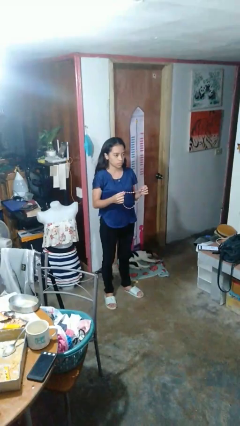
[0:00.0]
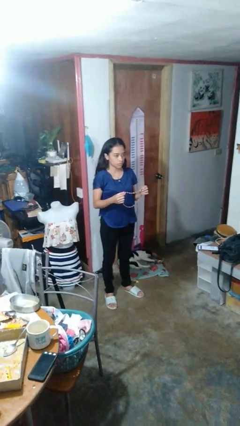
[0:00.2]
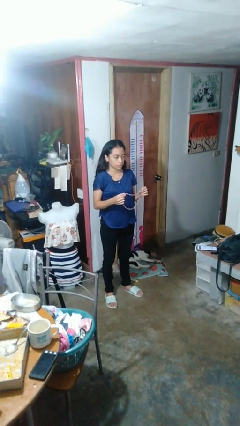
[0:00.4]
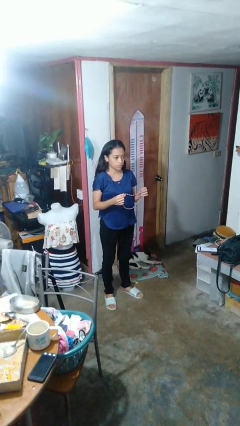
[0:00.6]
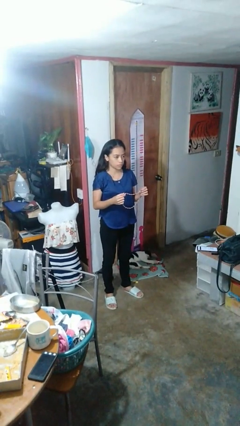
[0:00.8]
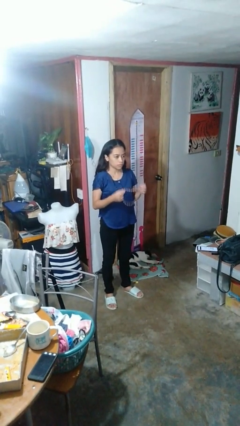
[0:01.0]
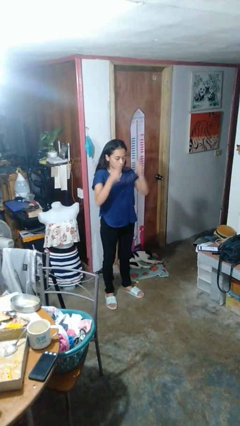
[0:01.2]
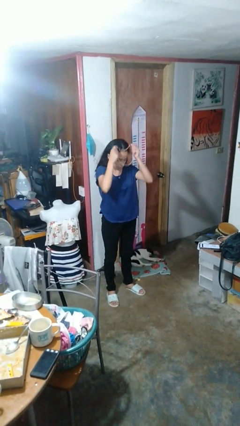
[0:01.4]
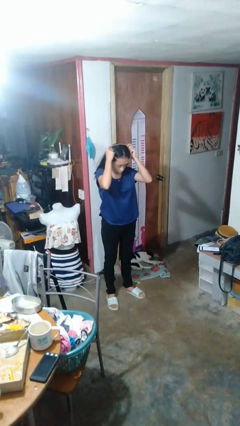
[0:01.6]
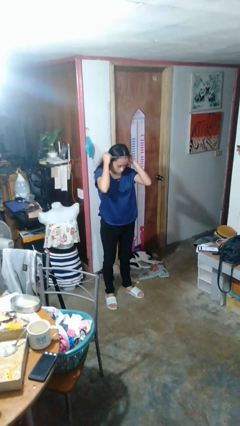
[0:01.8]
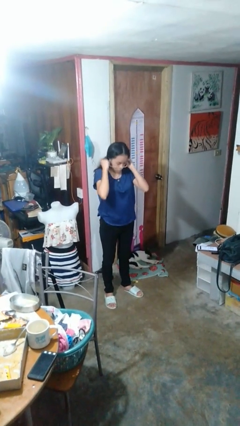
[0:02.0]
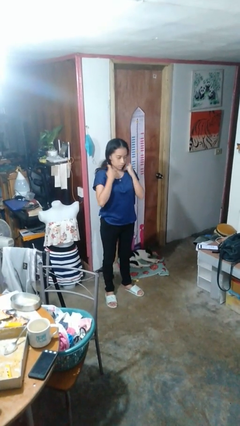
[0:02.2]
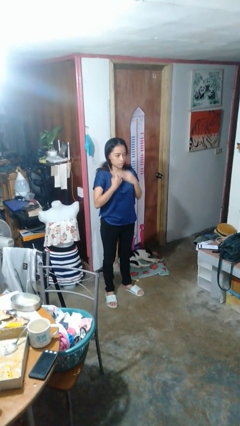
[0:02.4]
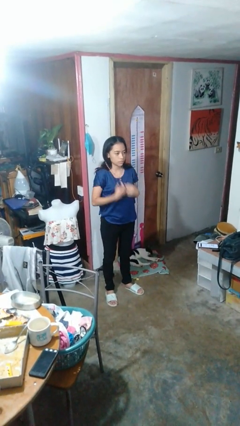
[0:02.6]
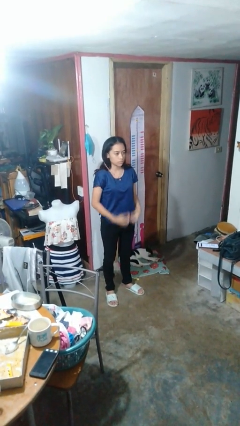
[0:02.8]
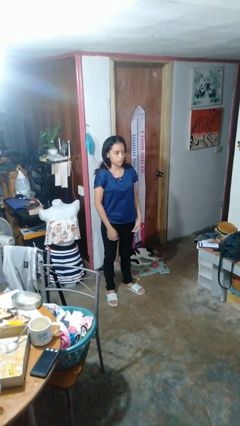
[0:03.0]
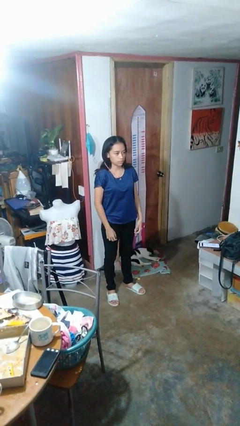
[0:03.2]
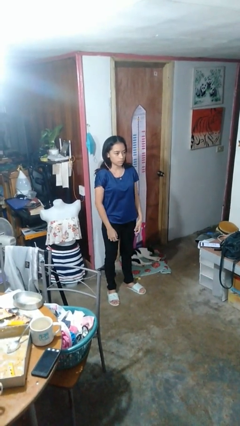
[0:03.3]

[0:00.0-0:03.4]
person puts on necklace

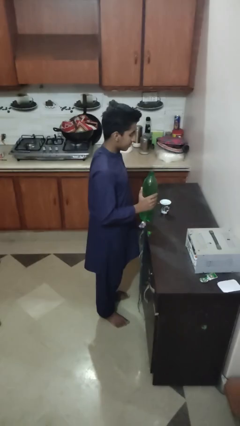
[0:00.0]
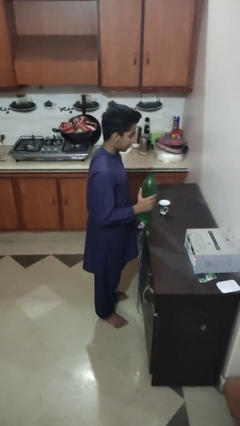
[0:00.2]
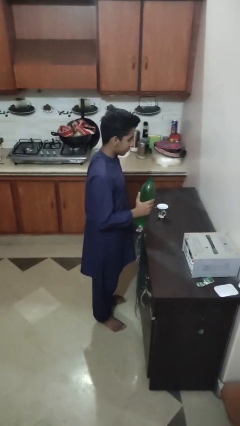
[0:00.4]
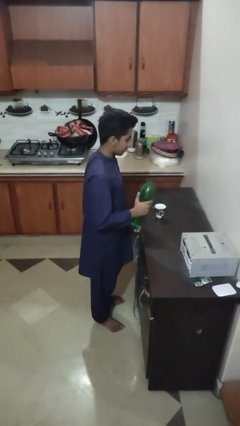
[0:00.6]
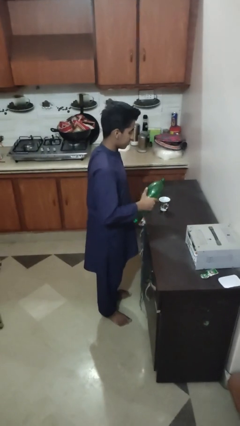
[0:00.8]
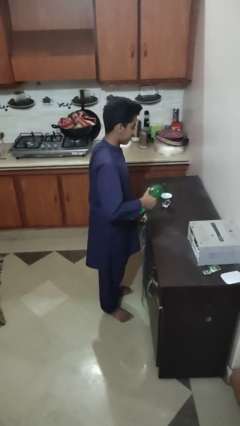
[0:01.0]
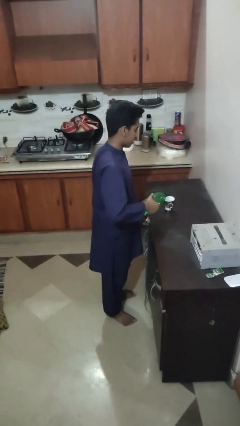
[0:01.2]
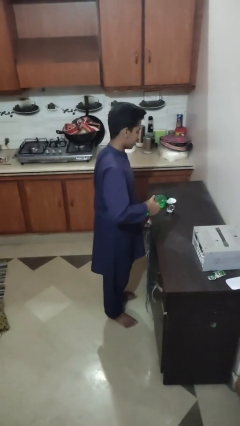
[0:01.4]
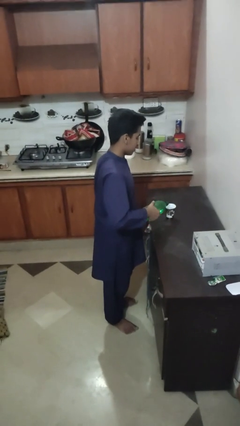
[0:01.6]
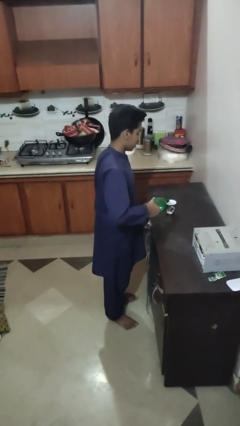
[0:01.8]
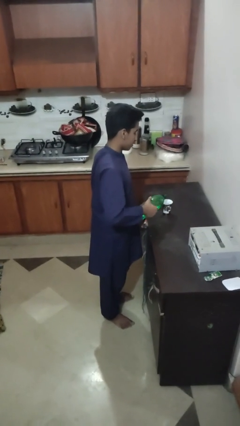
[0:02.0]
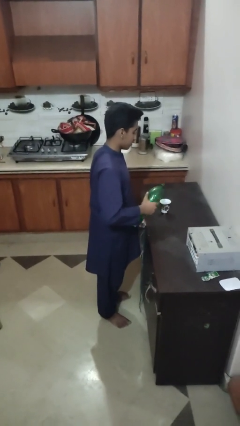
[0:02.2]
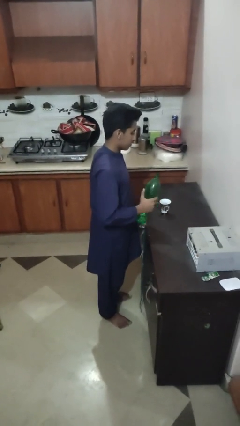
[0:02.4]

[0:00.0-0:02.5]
person pours liquid into cup

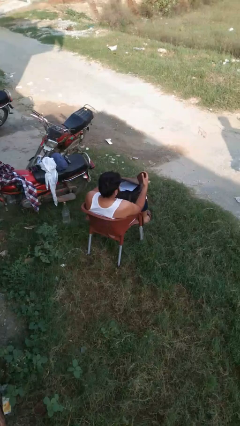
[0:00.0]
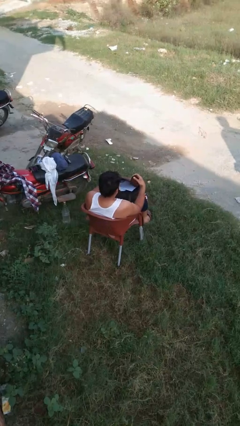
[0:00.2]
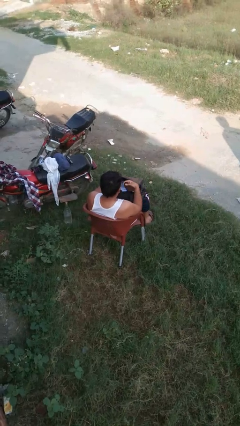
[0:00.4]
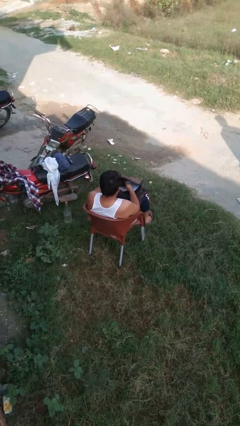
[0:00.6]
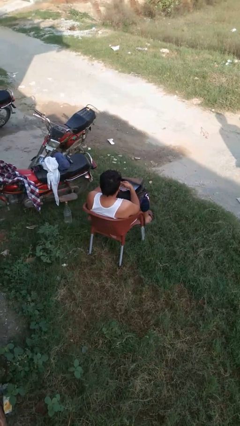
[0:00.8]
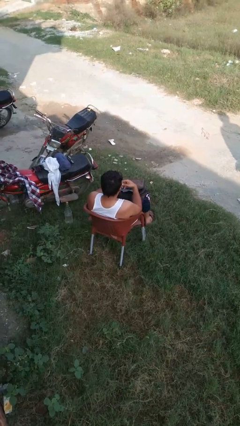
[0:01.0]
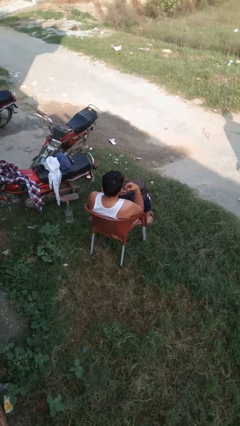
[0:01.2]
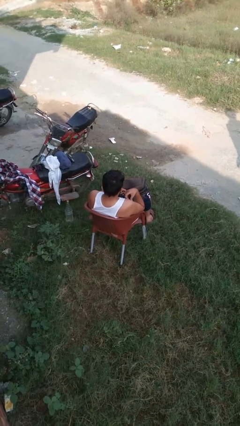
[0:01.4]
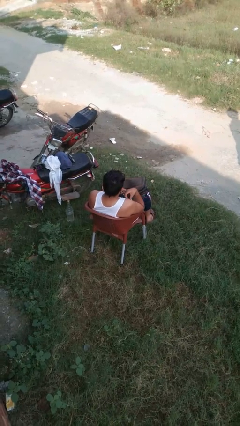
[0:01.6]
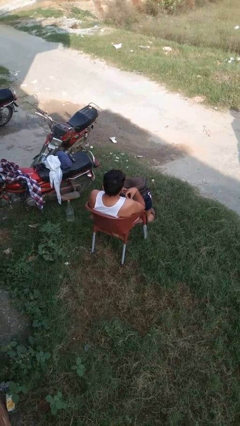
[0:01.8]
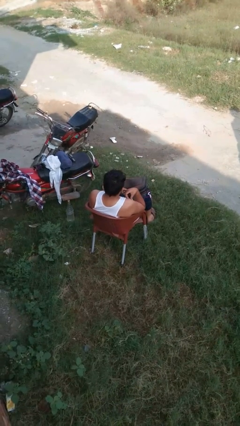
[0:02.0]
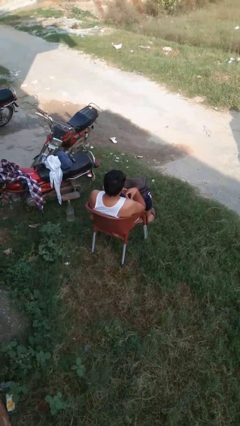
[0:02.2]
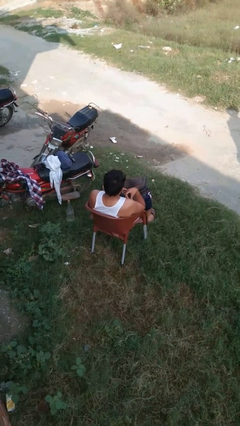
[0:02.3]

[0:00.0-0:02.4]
person puts object into backpack

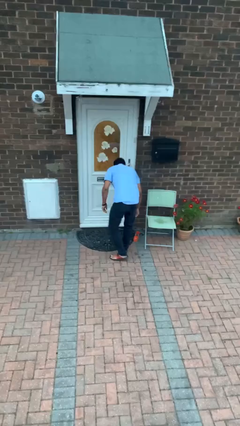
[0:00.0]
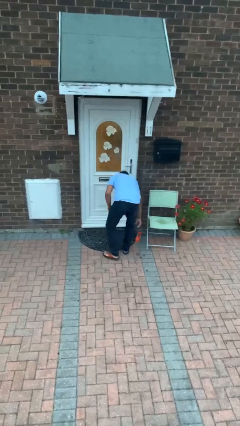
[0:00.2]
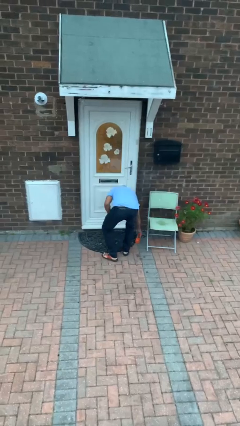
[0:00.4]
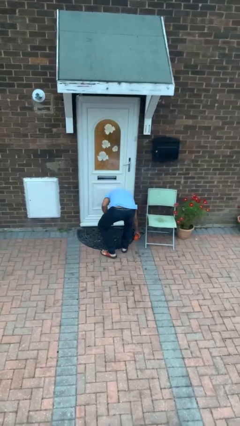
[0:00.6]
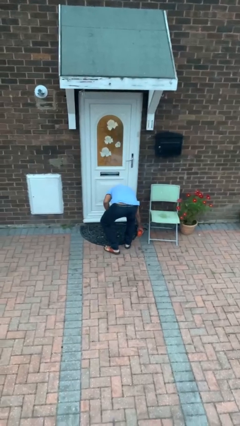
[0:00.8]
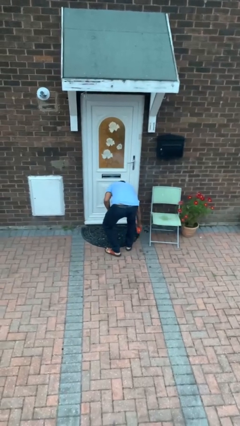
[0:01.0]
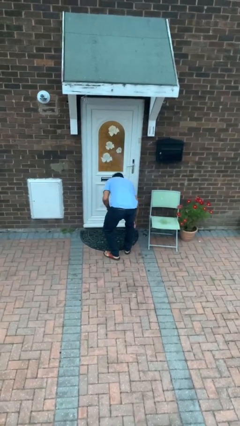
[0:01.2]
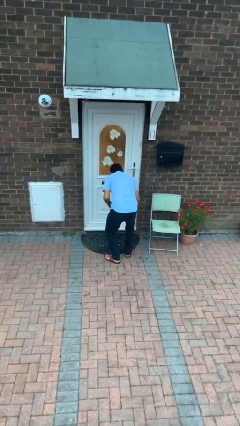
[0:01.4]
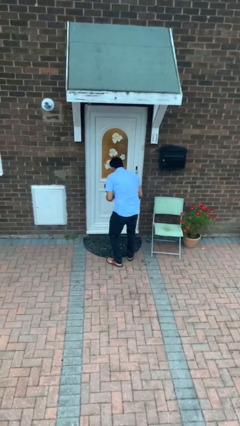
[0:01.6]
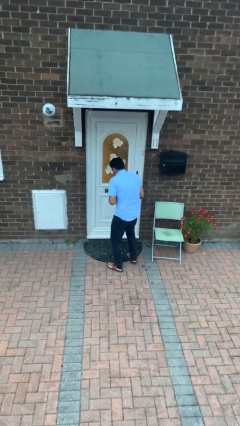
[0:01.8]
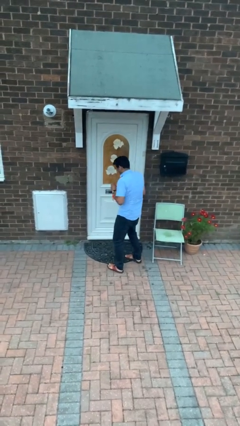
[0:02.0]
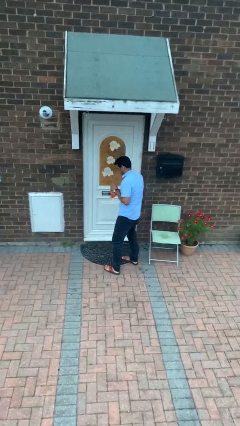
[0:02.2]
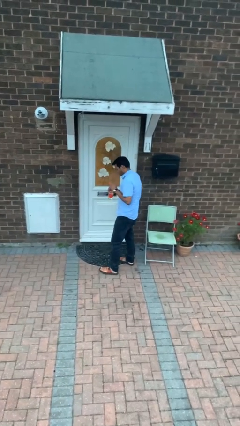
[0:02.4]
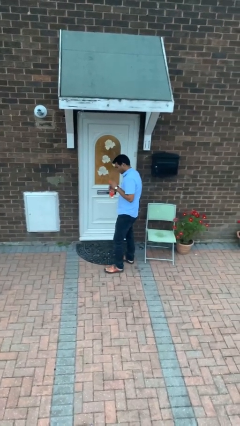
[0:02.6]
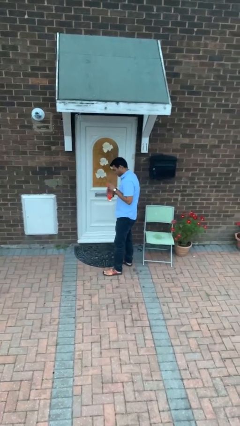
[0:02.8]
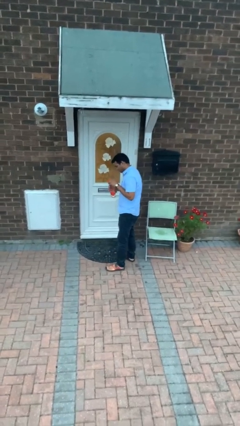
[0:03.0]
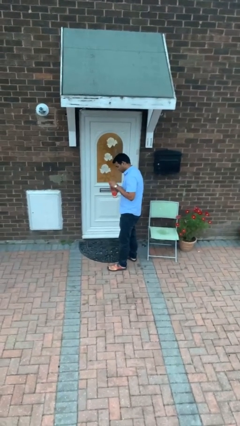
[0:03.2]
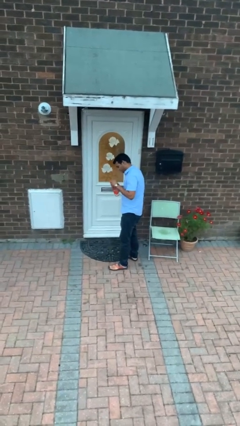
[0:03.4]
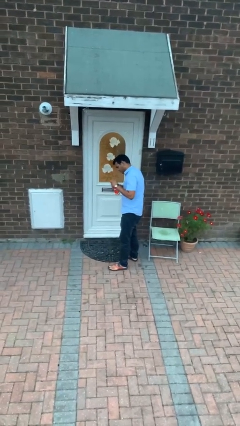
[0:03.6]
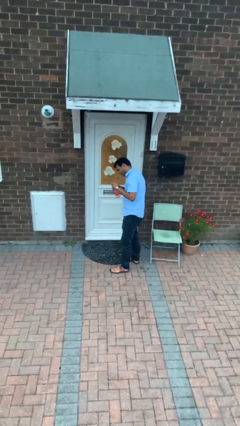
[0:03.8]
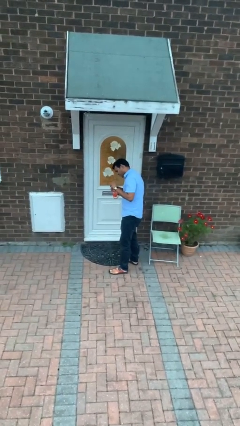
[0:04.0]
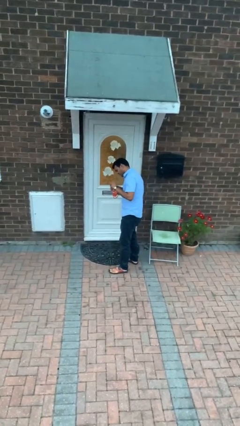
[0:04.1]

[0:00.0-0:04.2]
person picks up object from floor

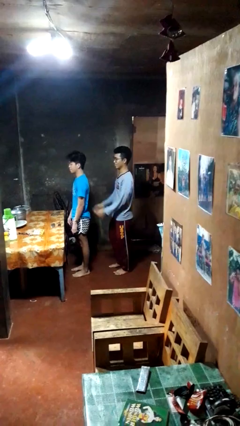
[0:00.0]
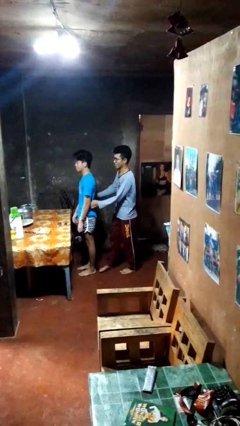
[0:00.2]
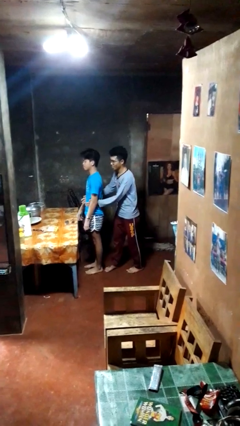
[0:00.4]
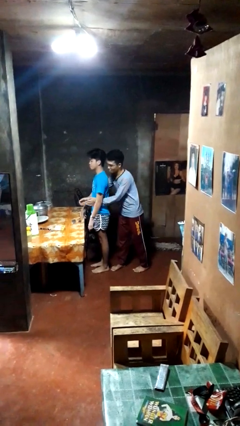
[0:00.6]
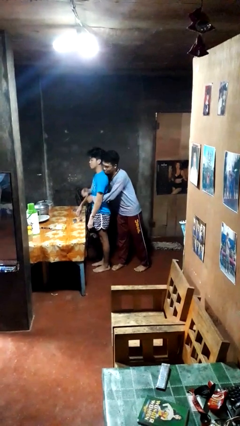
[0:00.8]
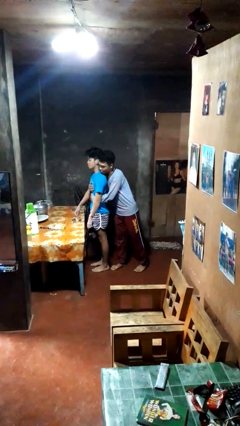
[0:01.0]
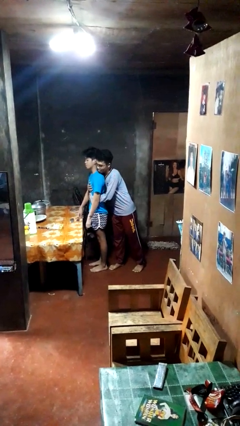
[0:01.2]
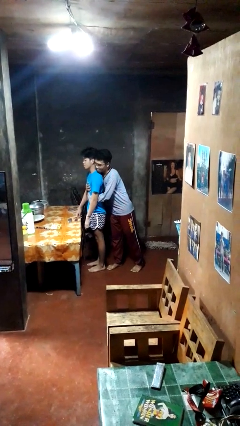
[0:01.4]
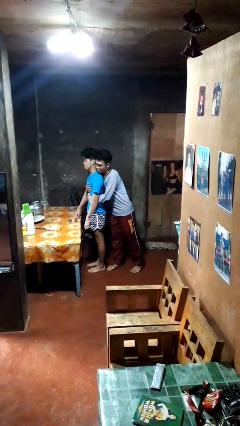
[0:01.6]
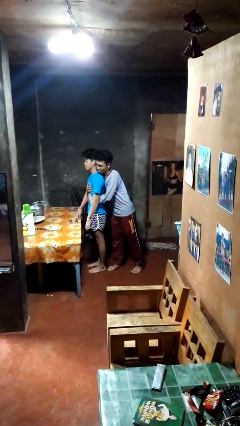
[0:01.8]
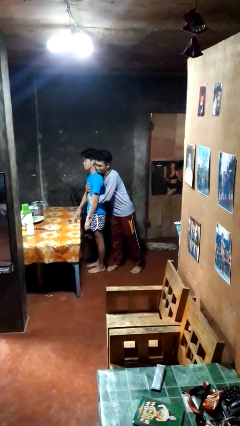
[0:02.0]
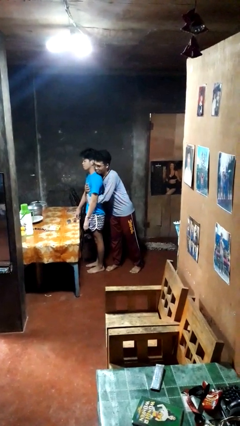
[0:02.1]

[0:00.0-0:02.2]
person hugs person from behind

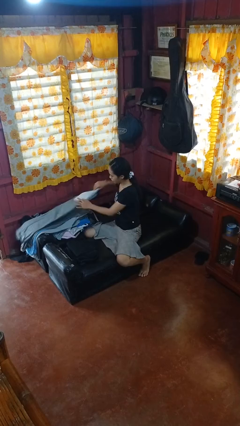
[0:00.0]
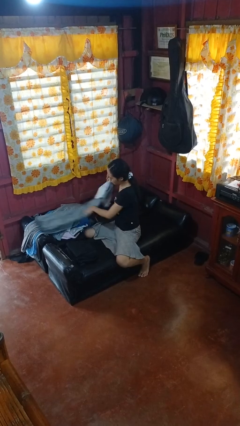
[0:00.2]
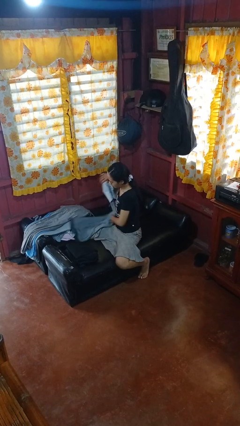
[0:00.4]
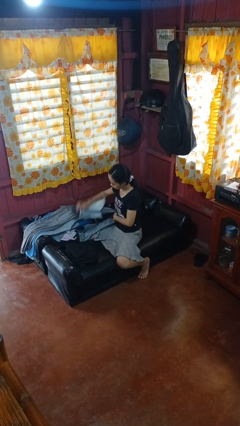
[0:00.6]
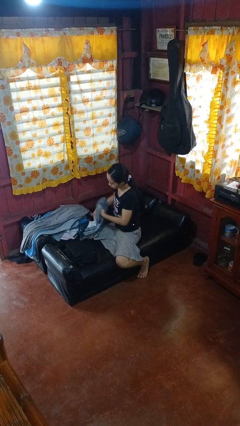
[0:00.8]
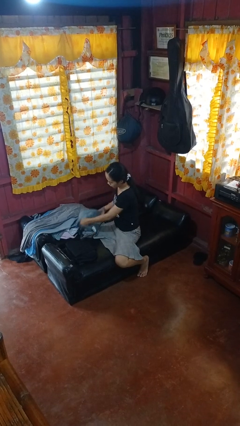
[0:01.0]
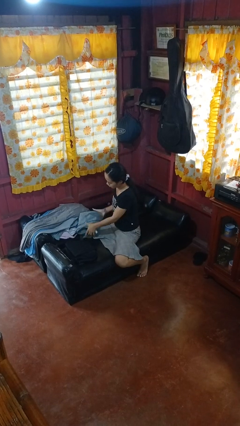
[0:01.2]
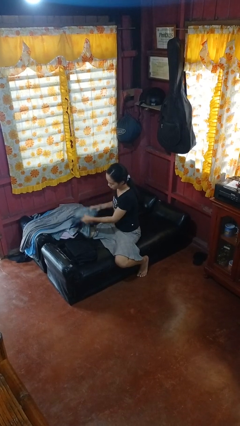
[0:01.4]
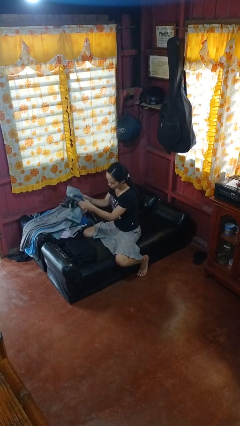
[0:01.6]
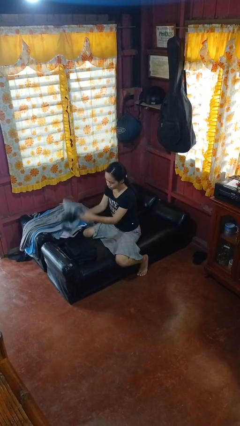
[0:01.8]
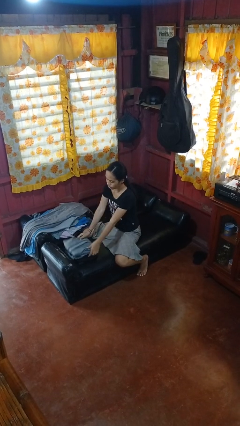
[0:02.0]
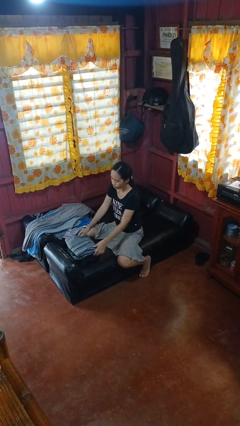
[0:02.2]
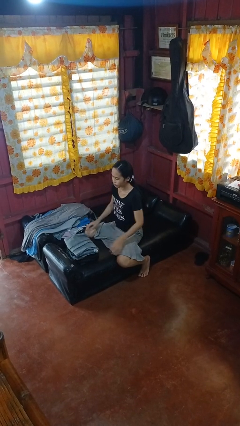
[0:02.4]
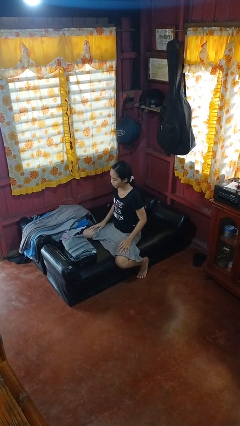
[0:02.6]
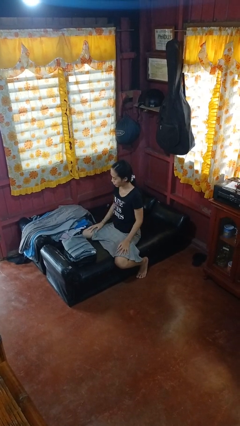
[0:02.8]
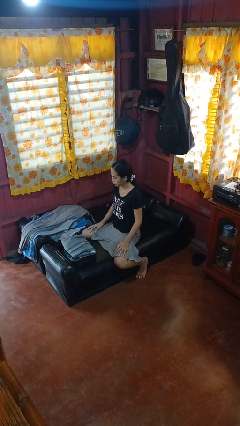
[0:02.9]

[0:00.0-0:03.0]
person folds pants

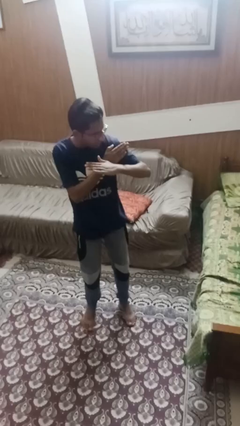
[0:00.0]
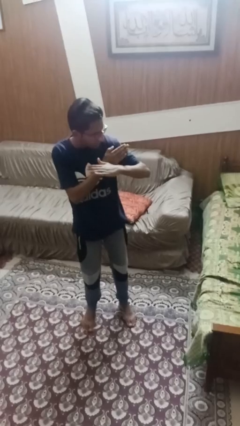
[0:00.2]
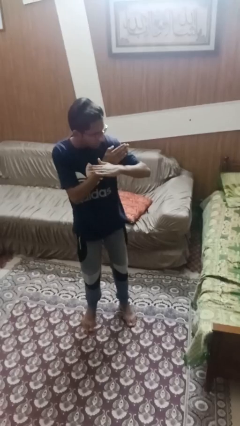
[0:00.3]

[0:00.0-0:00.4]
person karate chop
